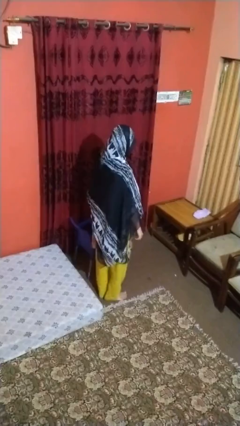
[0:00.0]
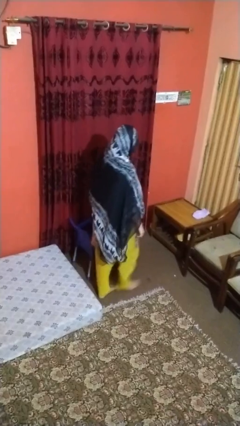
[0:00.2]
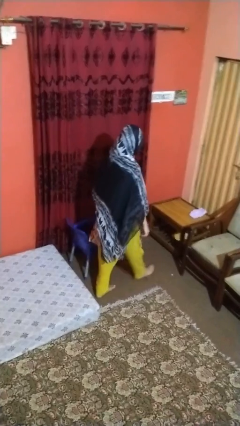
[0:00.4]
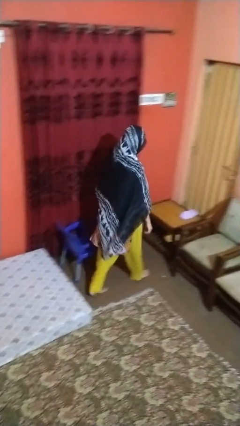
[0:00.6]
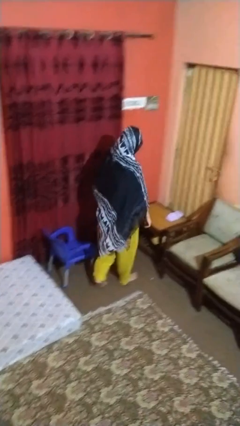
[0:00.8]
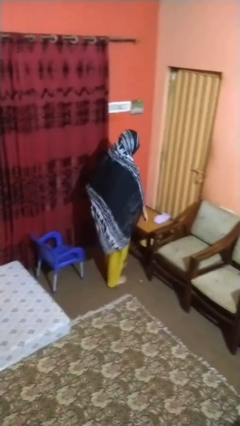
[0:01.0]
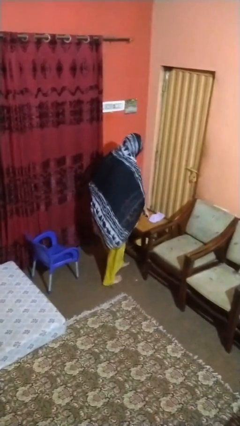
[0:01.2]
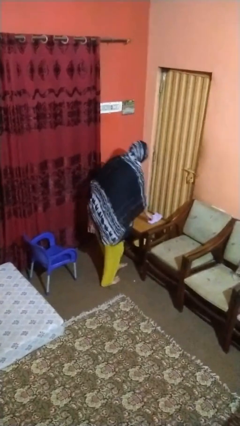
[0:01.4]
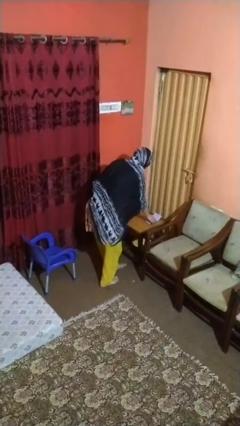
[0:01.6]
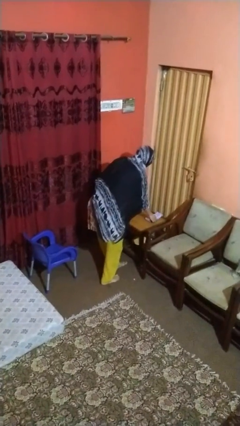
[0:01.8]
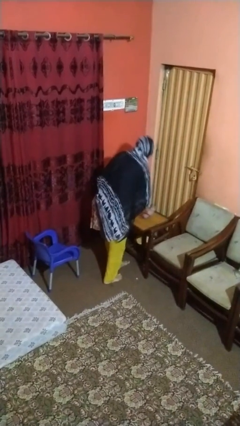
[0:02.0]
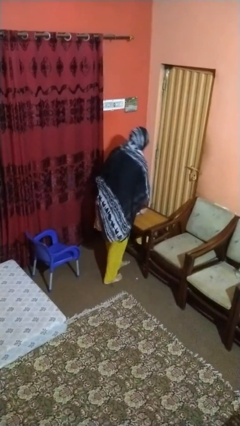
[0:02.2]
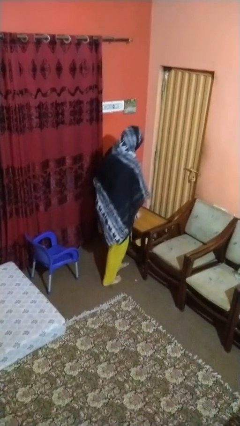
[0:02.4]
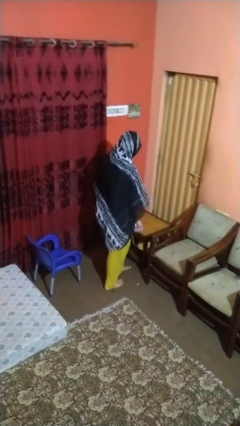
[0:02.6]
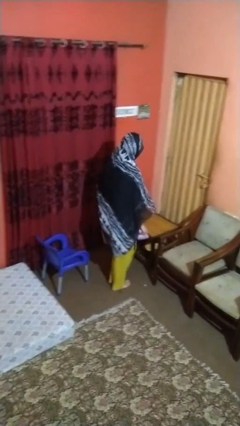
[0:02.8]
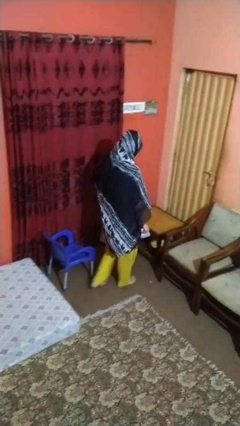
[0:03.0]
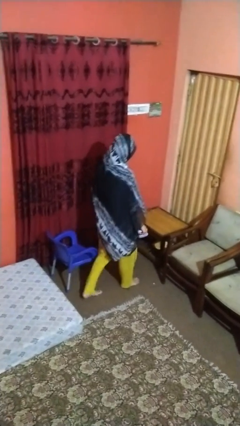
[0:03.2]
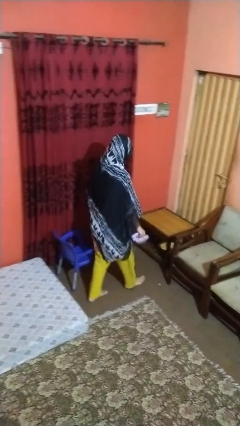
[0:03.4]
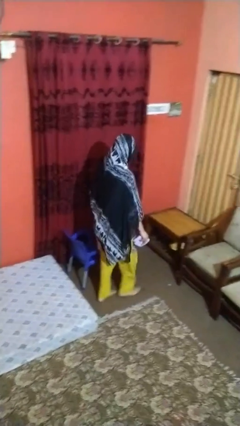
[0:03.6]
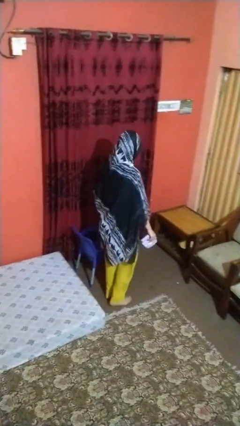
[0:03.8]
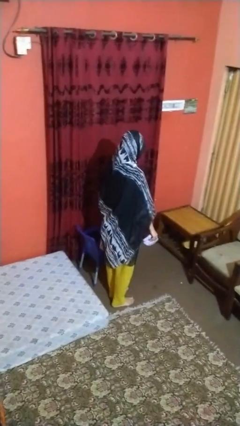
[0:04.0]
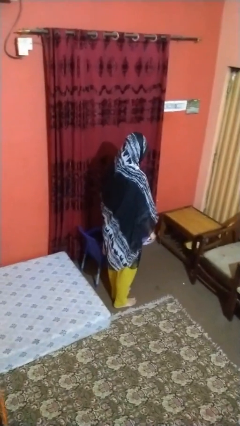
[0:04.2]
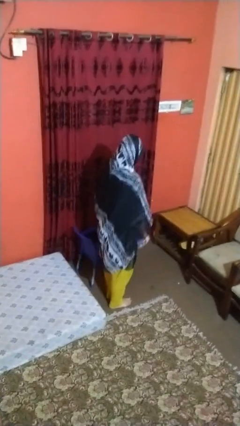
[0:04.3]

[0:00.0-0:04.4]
person picks up object from table

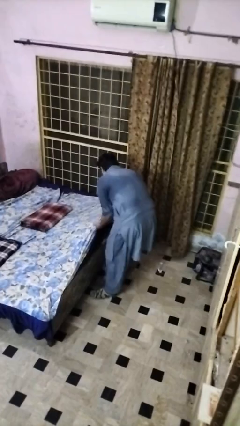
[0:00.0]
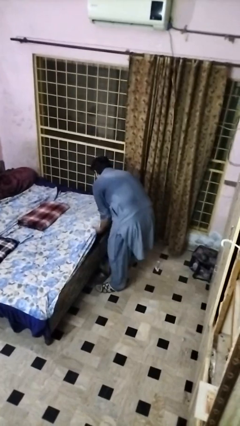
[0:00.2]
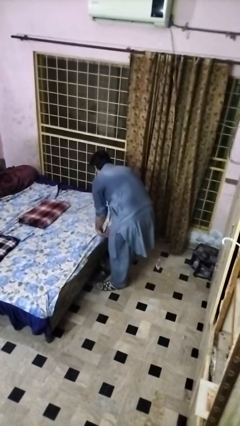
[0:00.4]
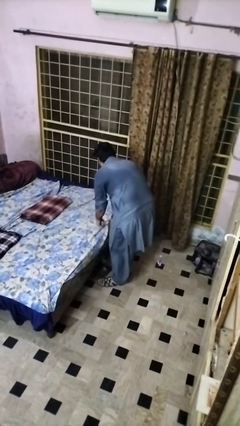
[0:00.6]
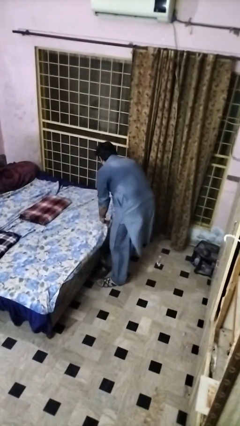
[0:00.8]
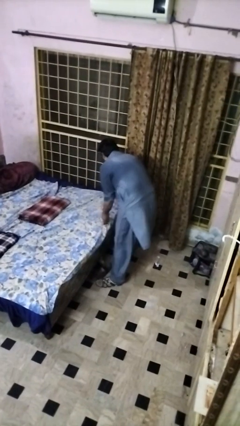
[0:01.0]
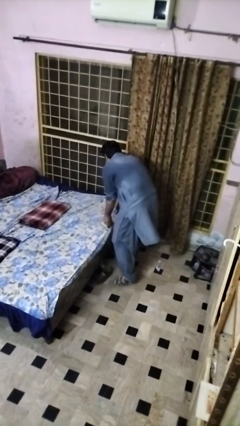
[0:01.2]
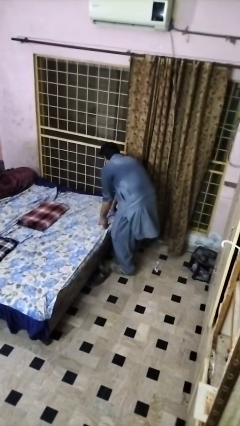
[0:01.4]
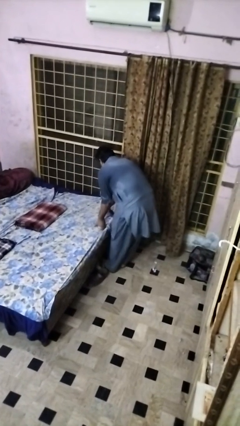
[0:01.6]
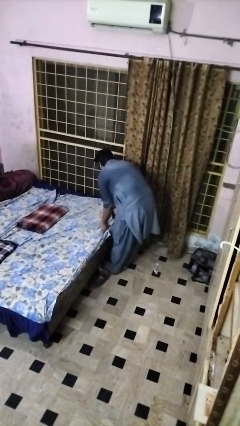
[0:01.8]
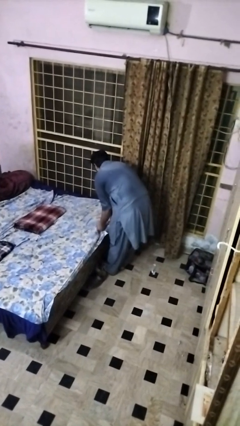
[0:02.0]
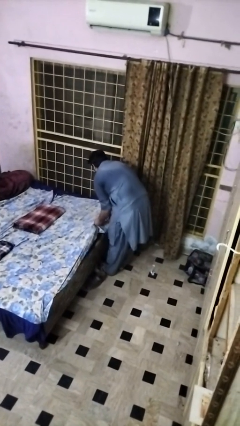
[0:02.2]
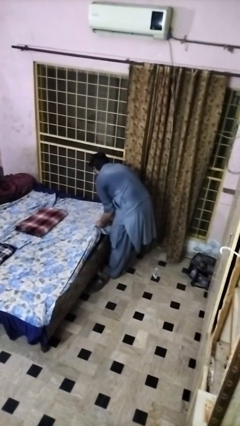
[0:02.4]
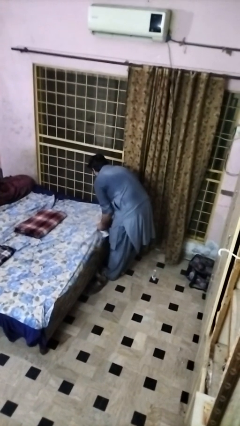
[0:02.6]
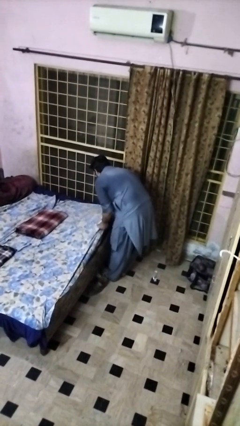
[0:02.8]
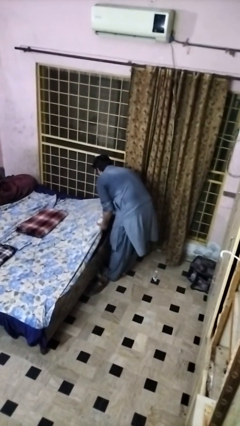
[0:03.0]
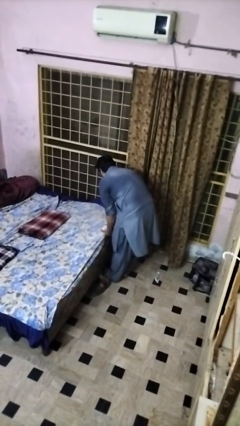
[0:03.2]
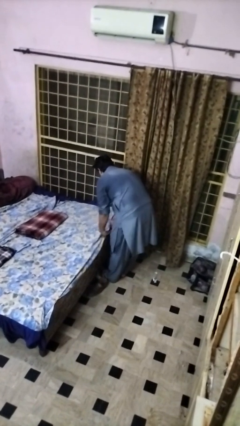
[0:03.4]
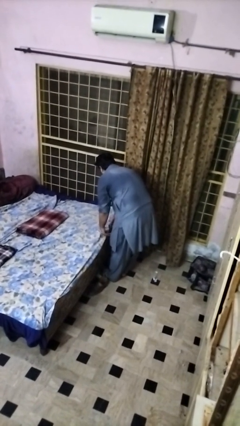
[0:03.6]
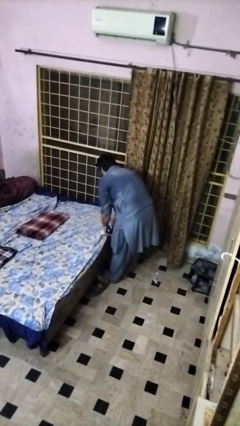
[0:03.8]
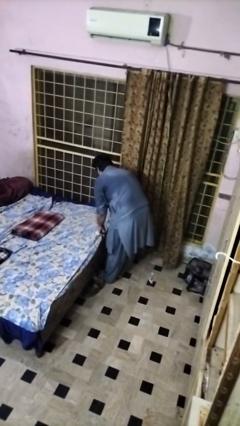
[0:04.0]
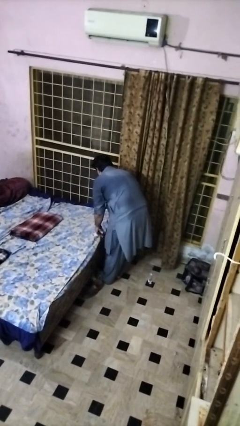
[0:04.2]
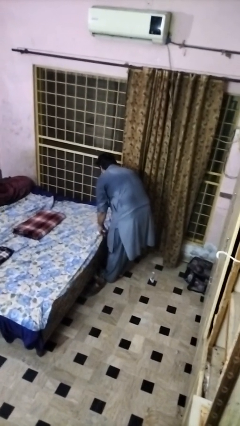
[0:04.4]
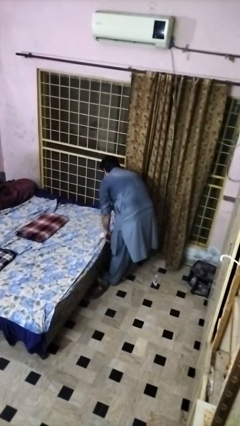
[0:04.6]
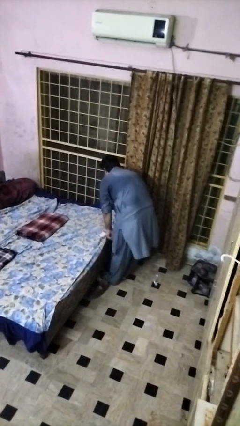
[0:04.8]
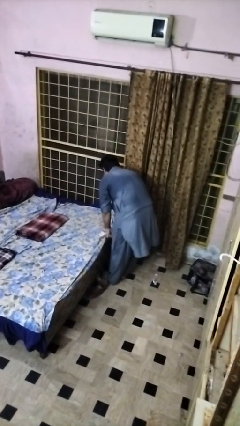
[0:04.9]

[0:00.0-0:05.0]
person makes bed

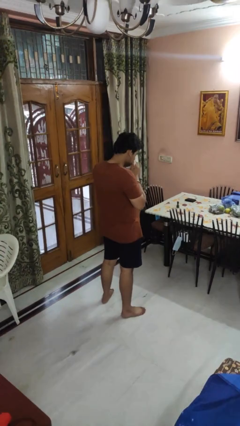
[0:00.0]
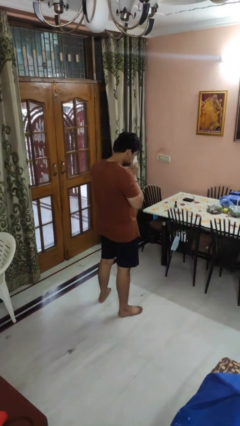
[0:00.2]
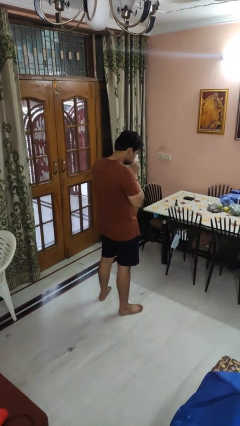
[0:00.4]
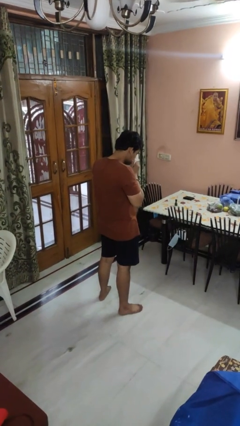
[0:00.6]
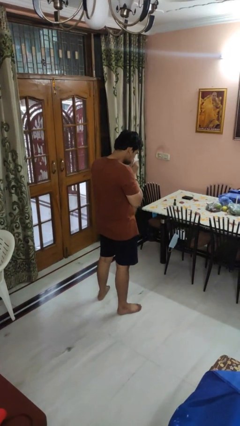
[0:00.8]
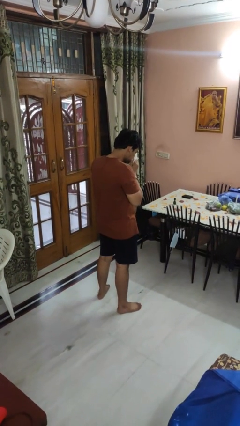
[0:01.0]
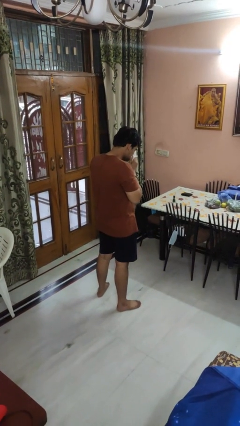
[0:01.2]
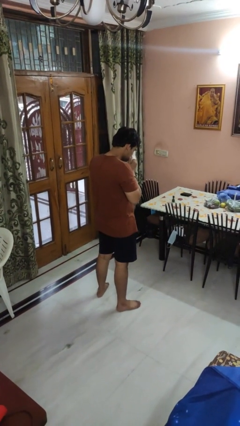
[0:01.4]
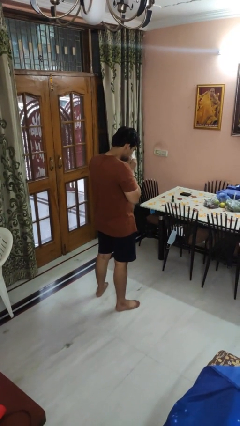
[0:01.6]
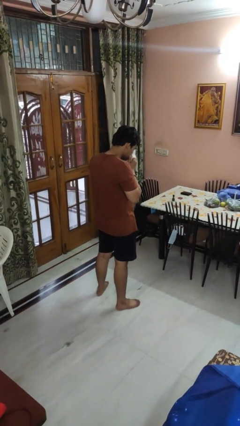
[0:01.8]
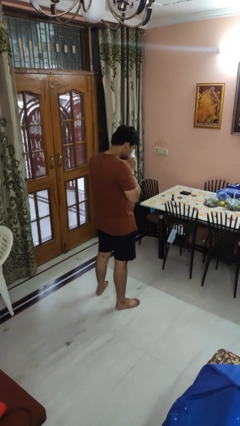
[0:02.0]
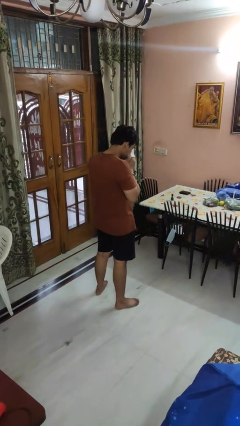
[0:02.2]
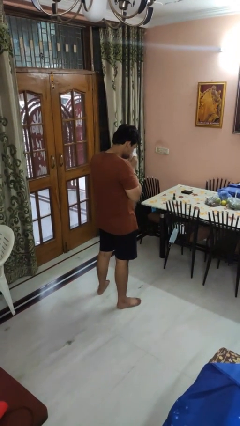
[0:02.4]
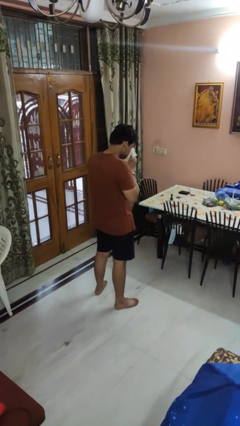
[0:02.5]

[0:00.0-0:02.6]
person blows nose

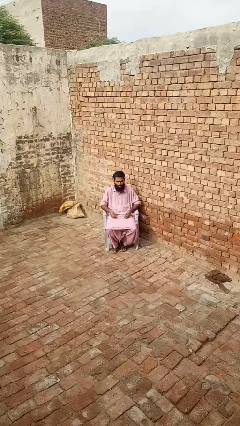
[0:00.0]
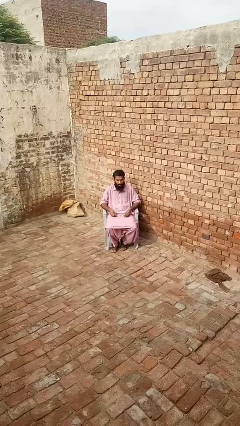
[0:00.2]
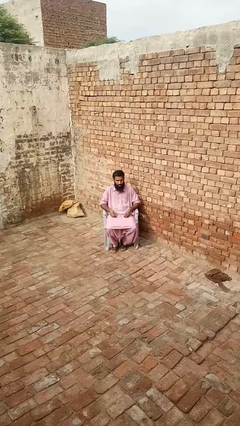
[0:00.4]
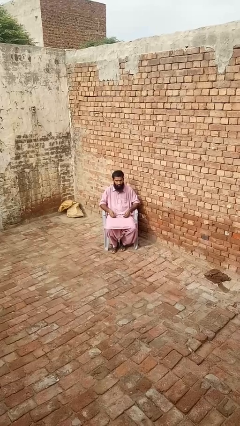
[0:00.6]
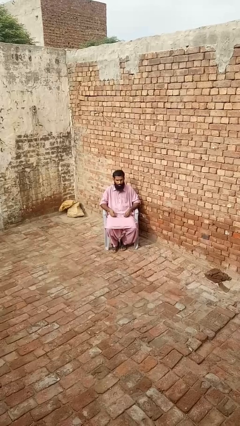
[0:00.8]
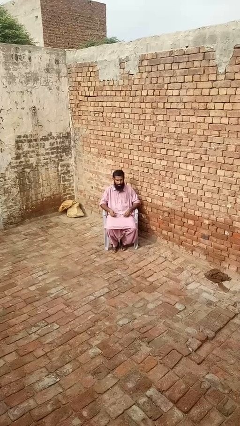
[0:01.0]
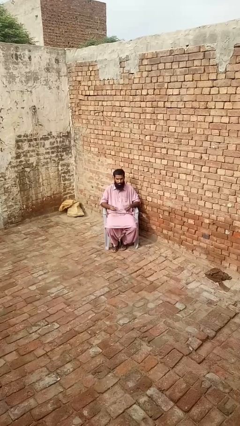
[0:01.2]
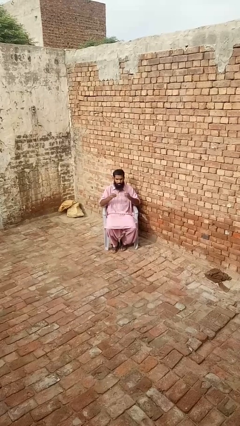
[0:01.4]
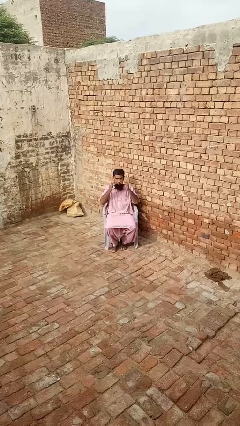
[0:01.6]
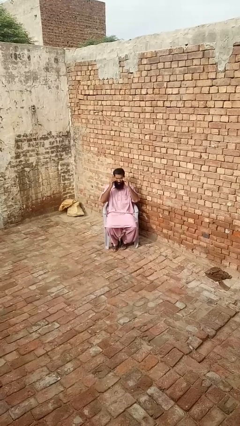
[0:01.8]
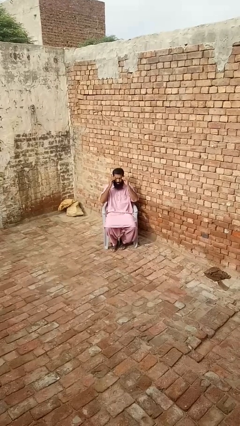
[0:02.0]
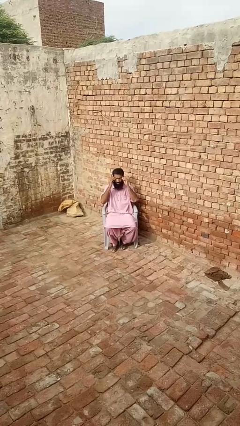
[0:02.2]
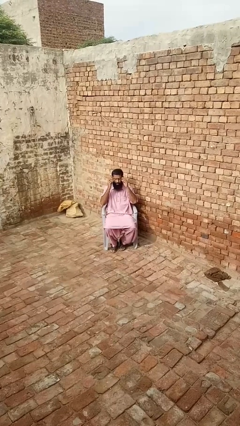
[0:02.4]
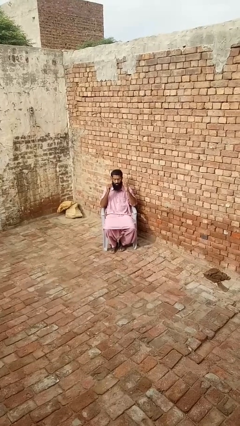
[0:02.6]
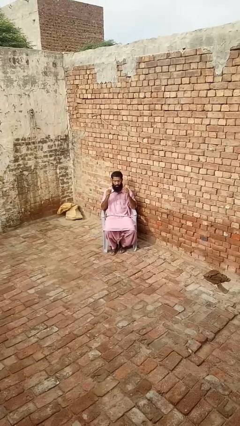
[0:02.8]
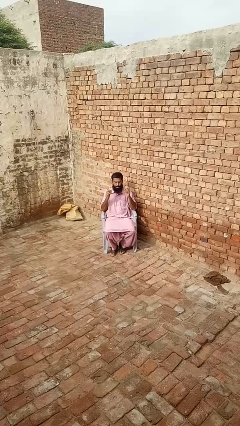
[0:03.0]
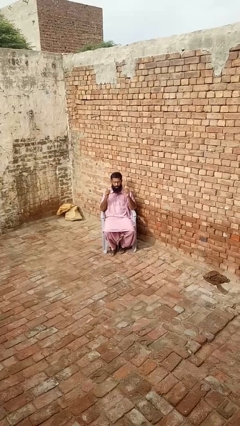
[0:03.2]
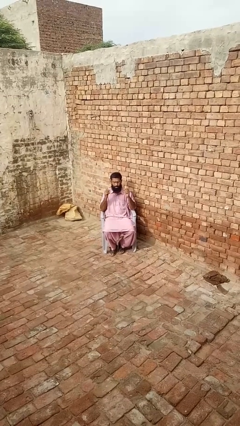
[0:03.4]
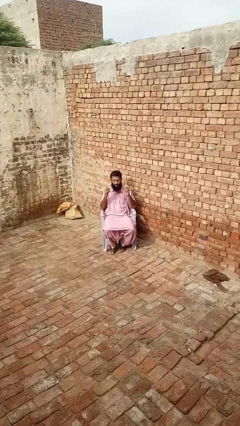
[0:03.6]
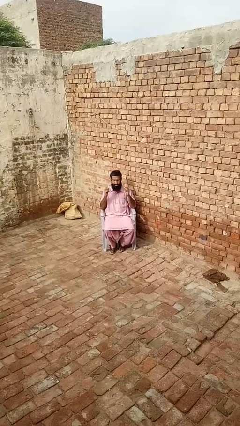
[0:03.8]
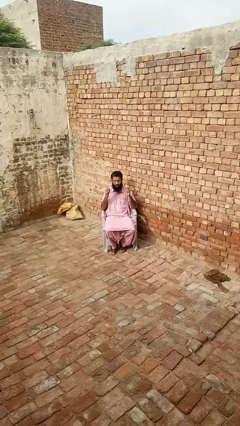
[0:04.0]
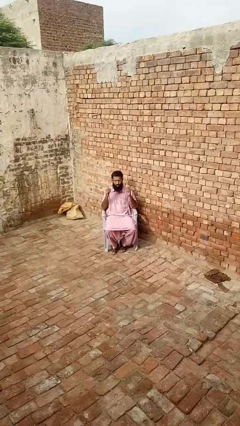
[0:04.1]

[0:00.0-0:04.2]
person puts on glasses

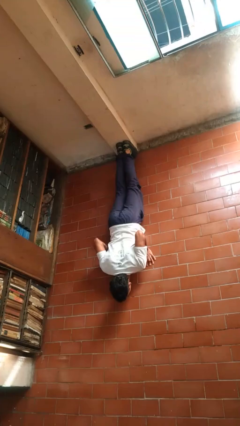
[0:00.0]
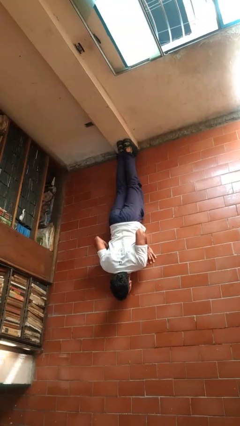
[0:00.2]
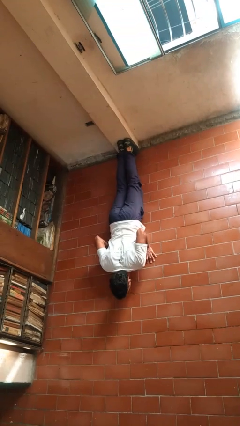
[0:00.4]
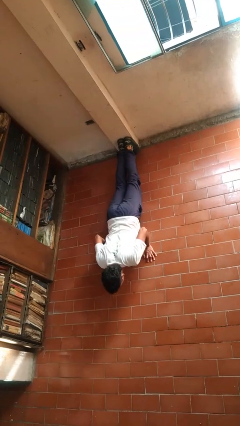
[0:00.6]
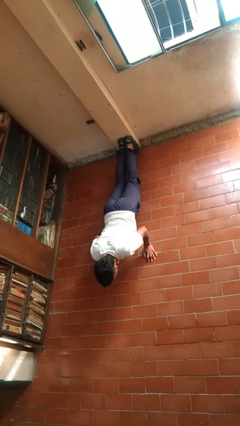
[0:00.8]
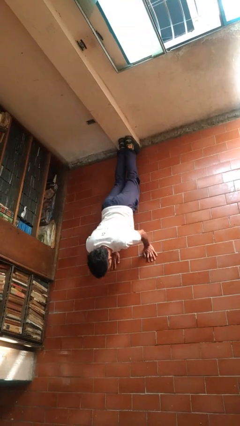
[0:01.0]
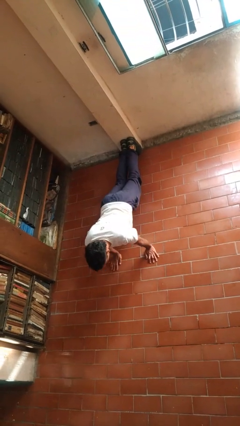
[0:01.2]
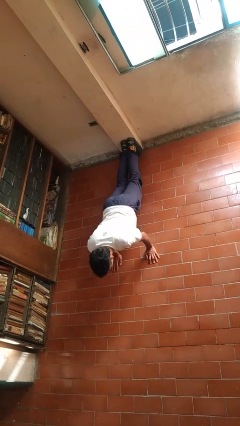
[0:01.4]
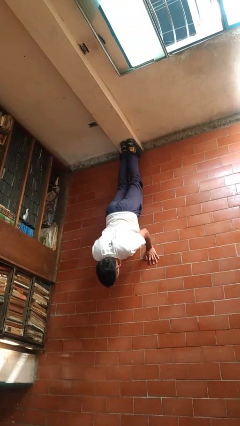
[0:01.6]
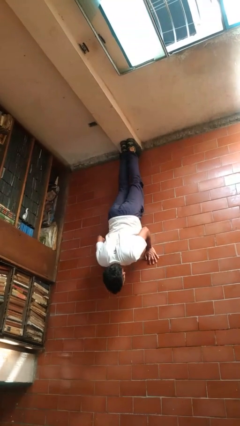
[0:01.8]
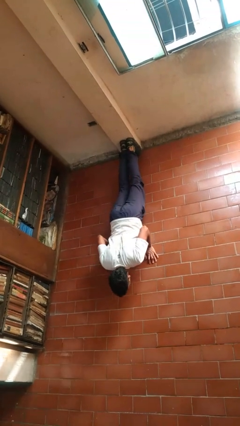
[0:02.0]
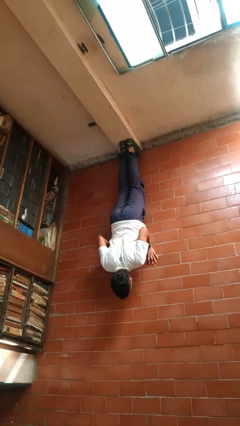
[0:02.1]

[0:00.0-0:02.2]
person exercises with pushup
